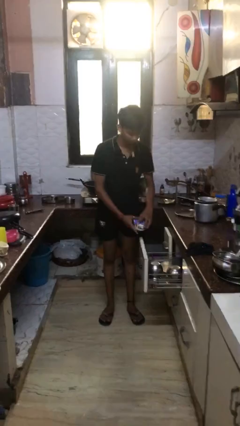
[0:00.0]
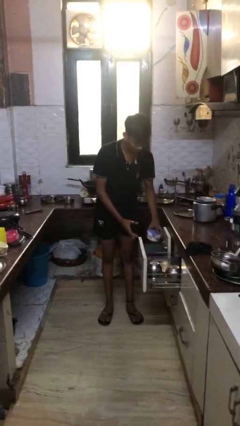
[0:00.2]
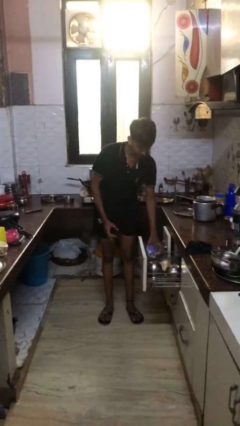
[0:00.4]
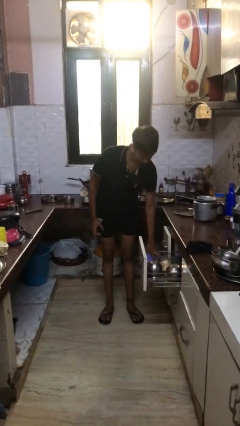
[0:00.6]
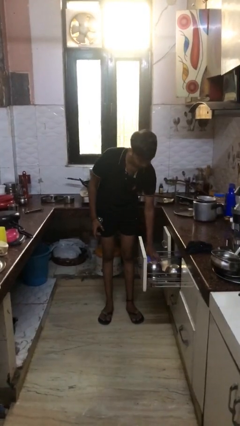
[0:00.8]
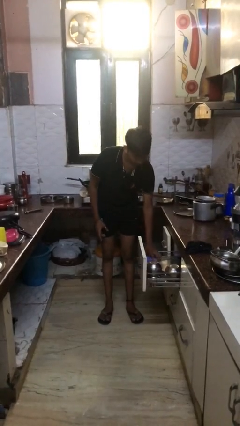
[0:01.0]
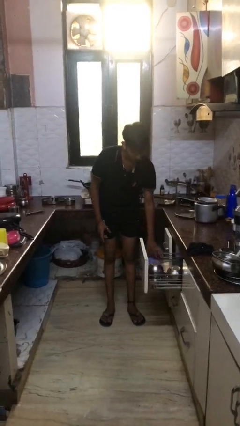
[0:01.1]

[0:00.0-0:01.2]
person puts object into kitchen drawer

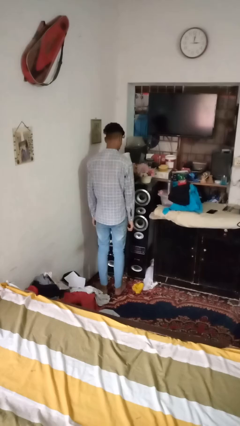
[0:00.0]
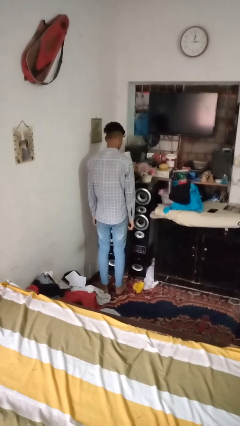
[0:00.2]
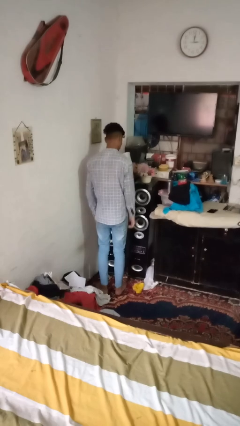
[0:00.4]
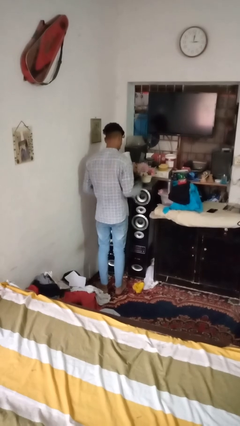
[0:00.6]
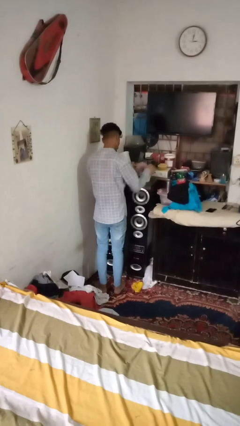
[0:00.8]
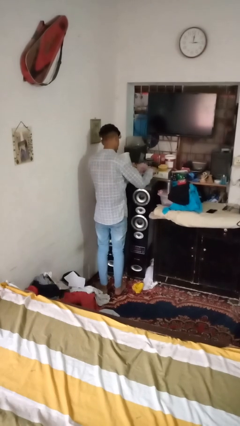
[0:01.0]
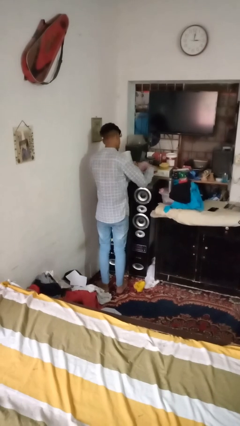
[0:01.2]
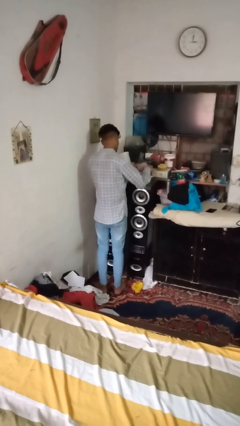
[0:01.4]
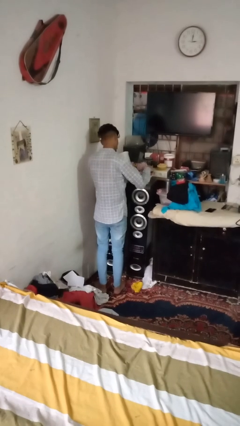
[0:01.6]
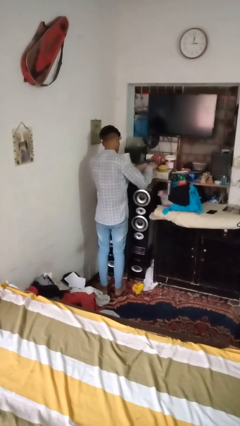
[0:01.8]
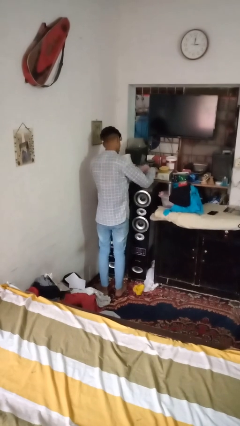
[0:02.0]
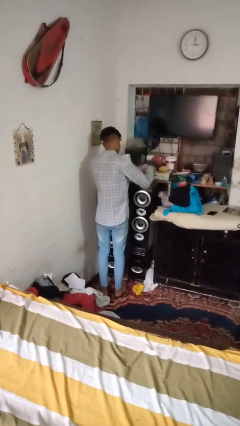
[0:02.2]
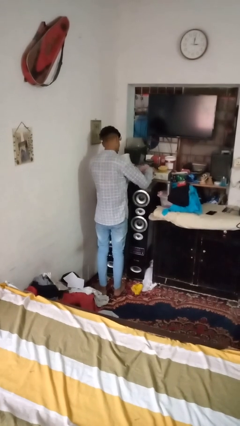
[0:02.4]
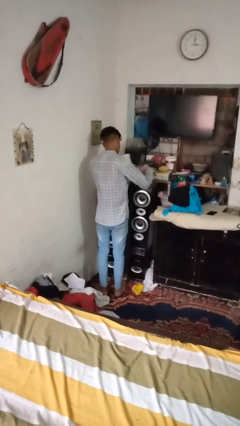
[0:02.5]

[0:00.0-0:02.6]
person arranges flowers in vase

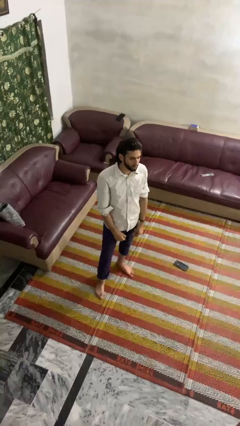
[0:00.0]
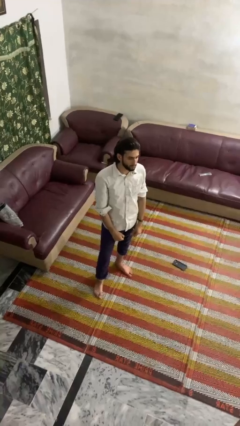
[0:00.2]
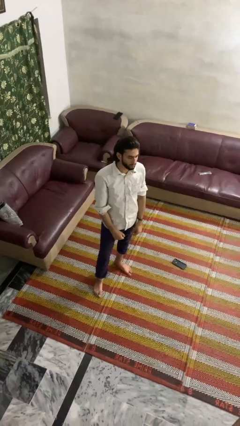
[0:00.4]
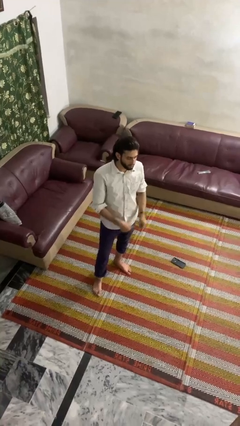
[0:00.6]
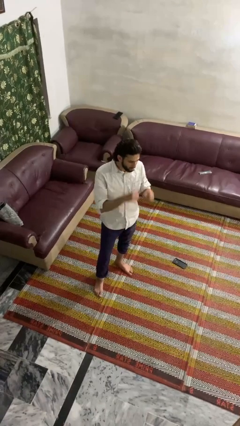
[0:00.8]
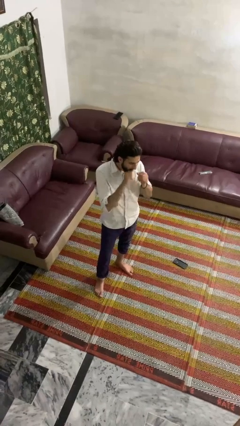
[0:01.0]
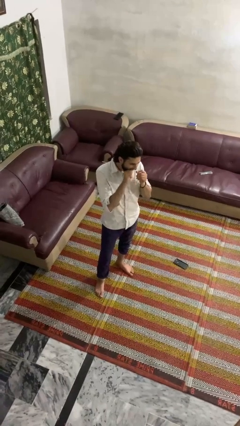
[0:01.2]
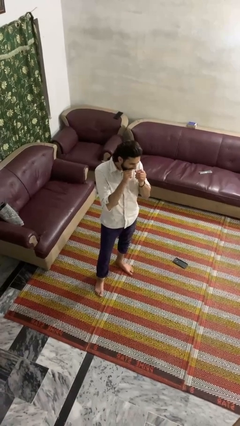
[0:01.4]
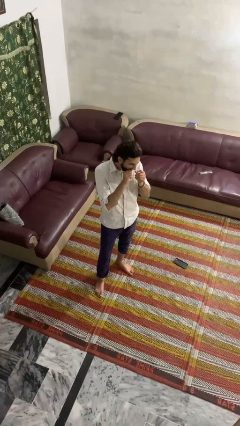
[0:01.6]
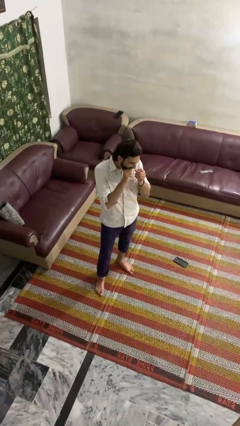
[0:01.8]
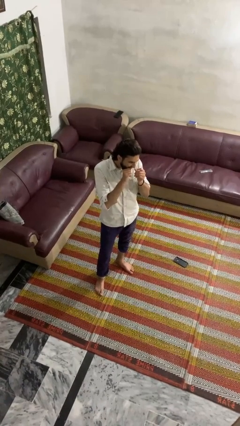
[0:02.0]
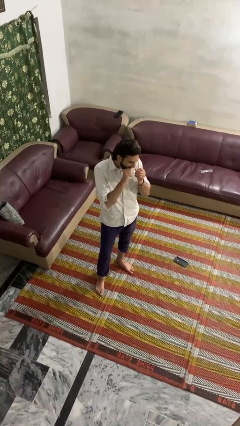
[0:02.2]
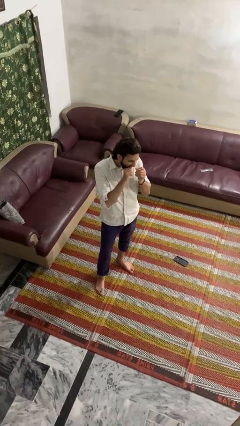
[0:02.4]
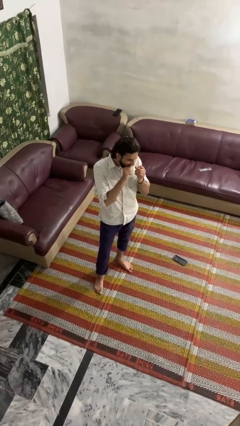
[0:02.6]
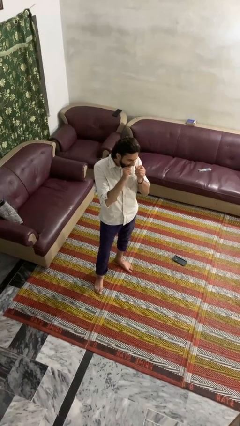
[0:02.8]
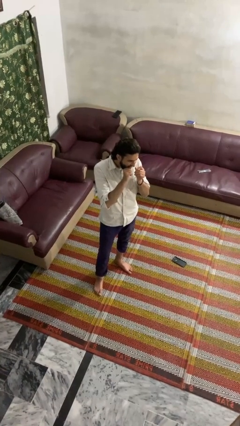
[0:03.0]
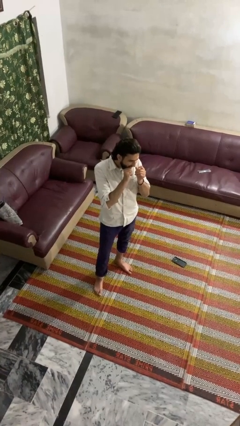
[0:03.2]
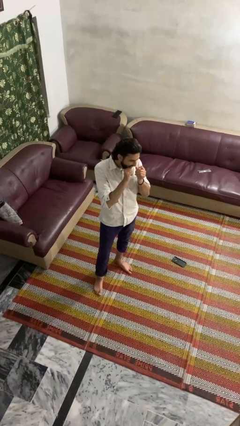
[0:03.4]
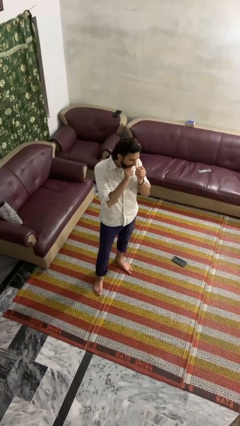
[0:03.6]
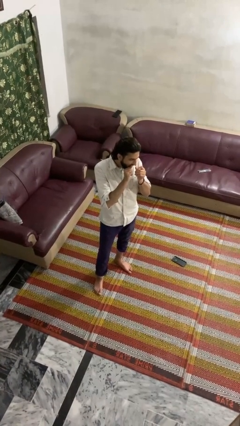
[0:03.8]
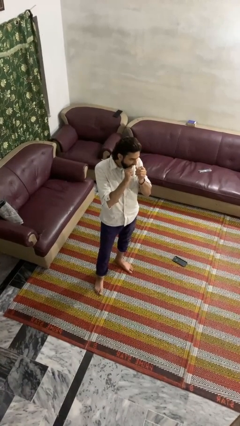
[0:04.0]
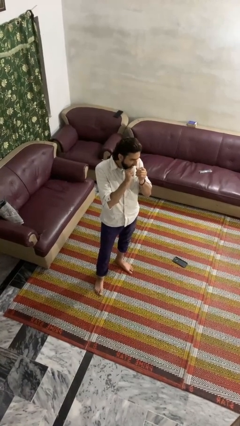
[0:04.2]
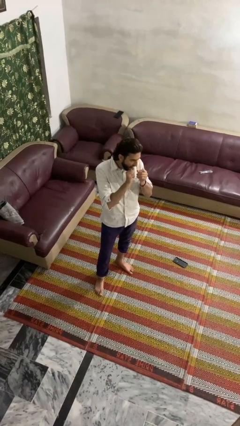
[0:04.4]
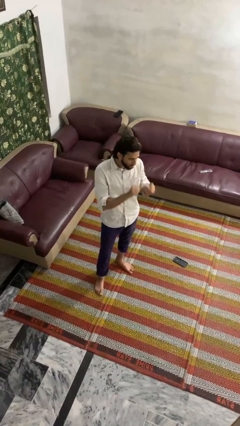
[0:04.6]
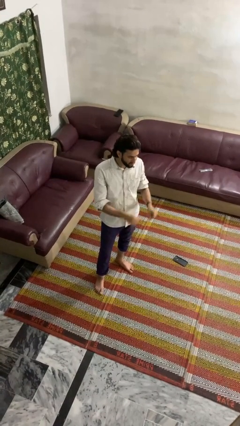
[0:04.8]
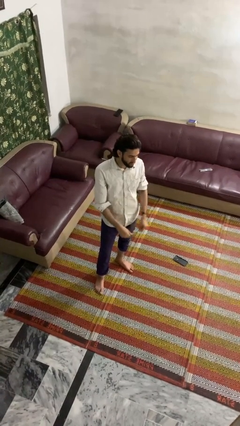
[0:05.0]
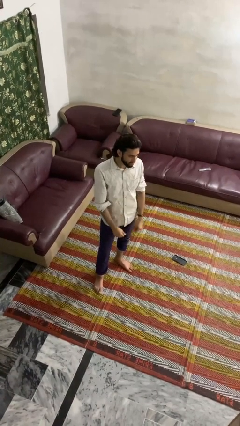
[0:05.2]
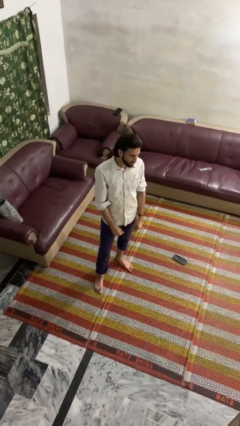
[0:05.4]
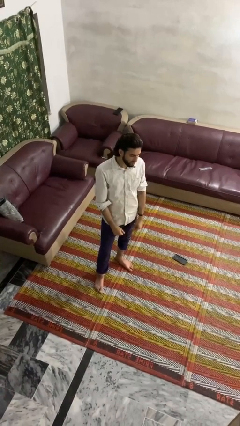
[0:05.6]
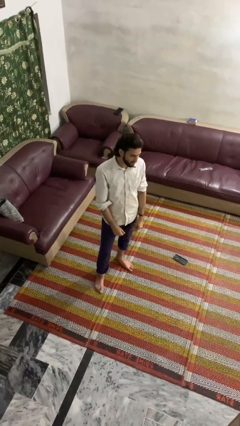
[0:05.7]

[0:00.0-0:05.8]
person flosses

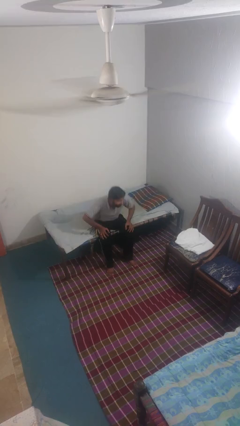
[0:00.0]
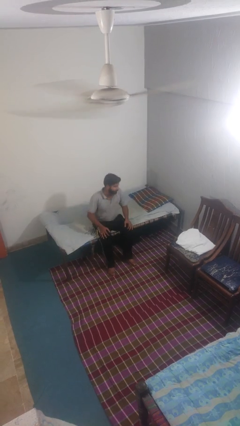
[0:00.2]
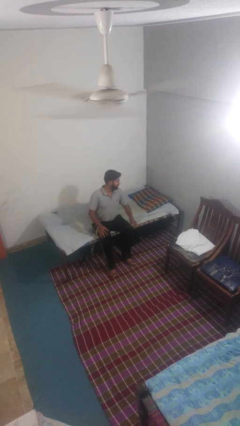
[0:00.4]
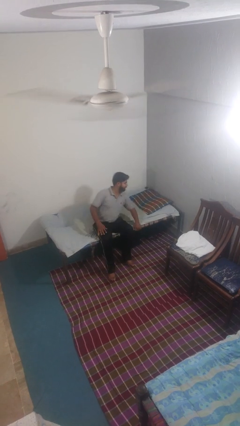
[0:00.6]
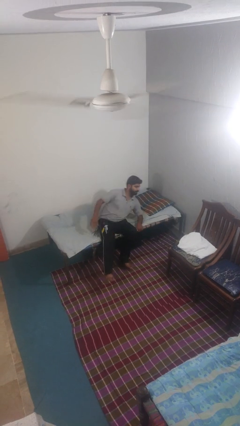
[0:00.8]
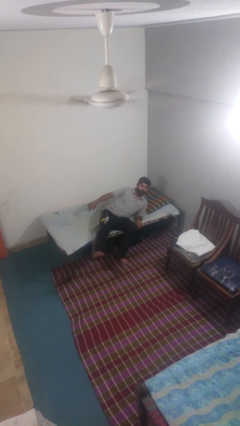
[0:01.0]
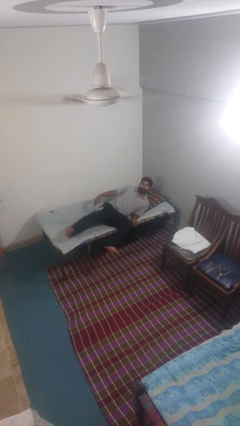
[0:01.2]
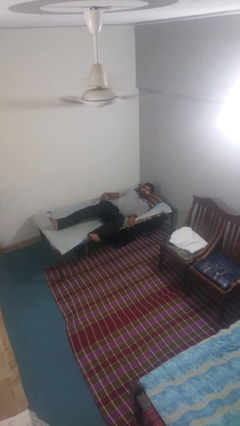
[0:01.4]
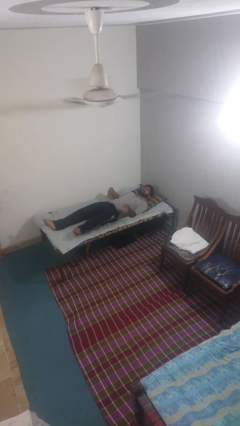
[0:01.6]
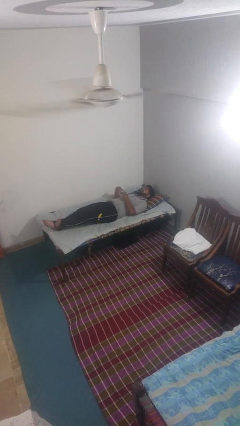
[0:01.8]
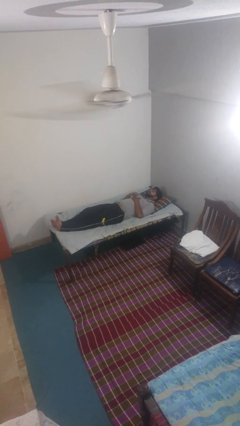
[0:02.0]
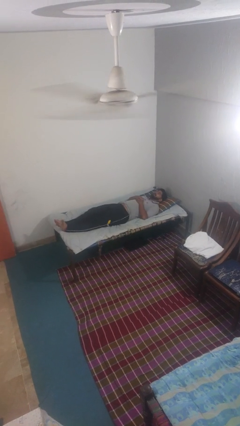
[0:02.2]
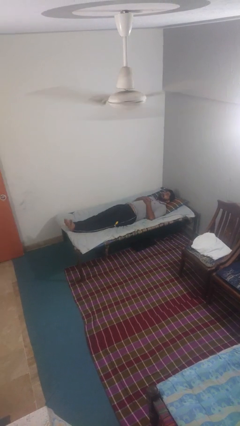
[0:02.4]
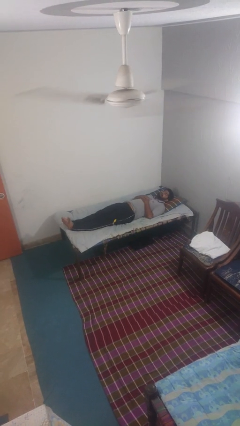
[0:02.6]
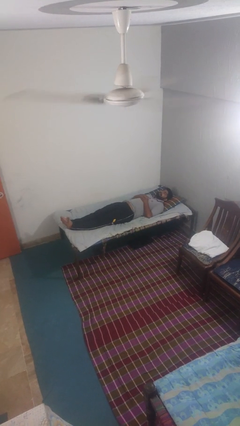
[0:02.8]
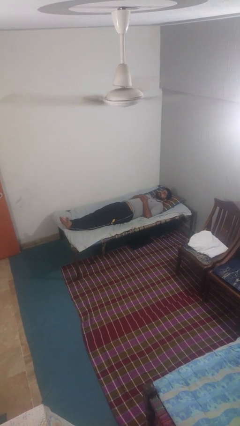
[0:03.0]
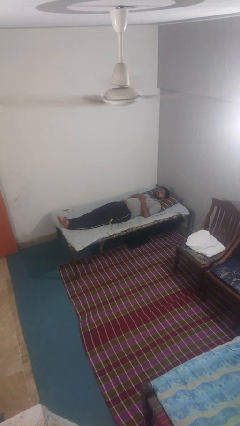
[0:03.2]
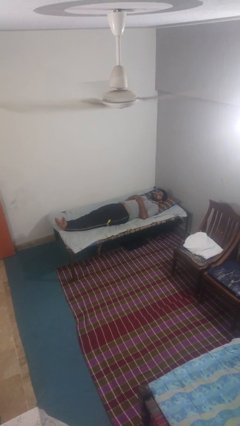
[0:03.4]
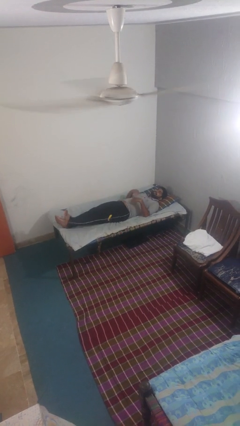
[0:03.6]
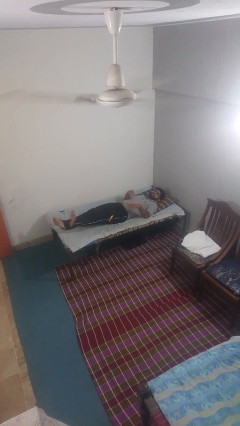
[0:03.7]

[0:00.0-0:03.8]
person lies down on bed

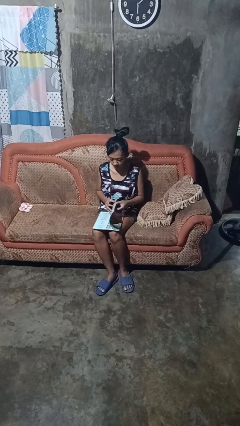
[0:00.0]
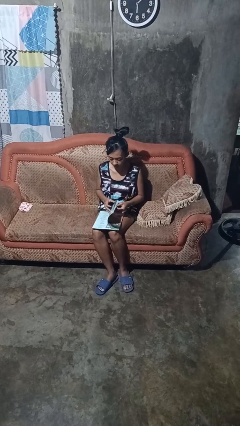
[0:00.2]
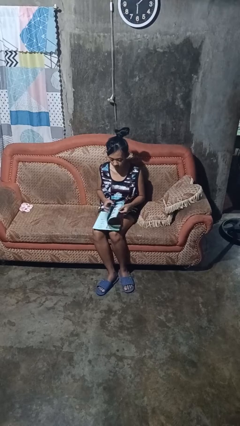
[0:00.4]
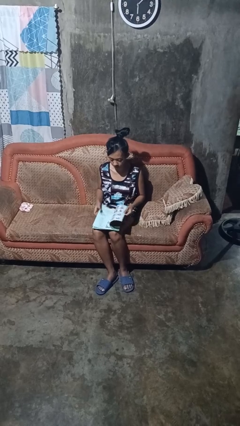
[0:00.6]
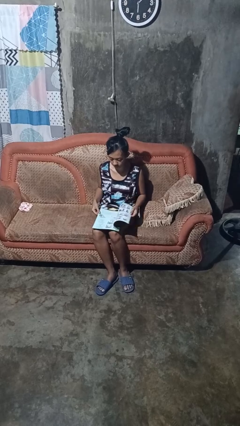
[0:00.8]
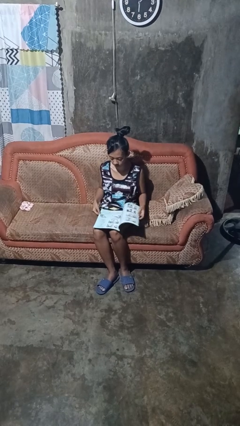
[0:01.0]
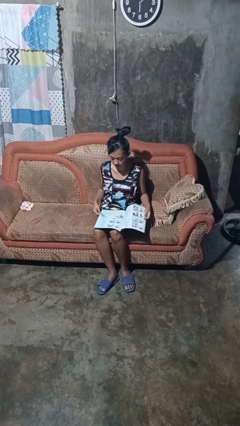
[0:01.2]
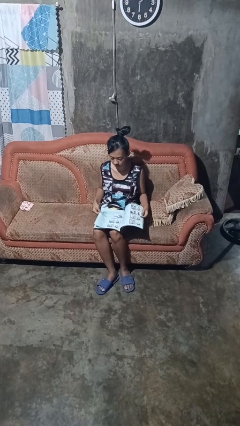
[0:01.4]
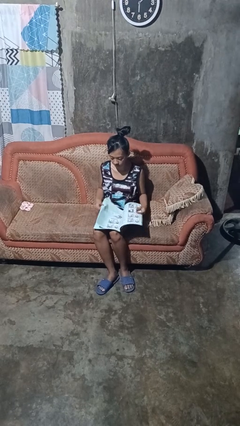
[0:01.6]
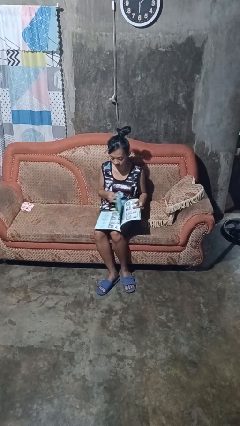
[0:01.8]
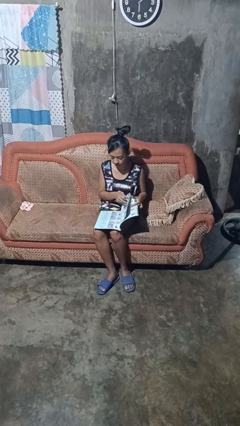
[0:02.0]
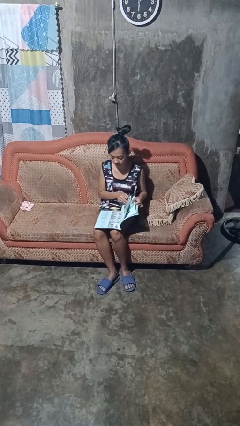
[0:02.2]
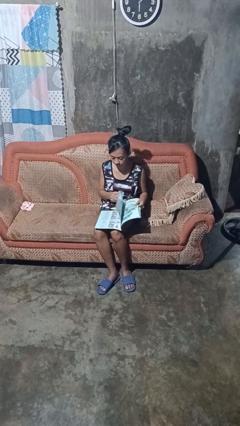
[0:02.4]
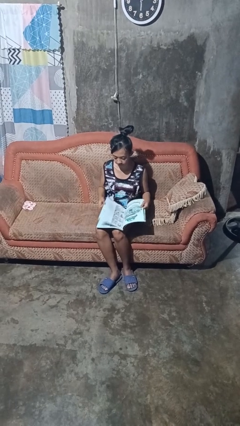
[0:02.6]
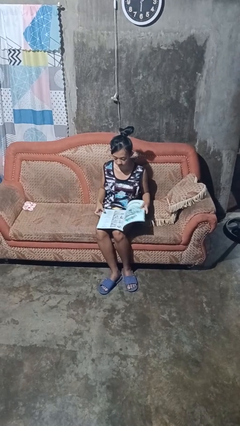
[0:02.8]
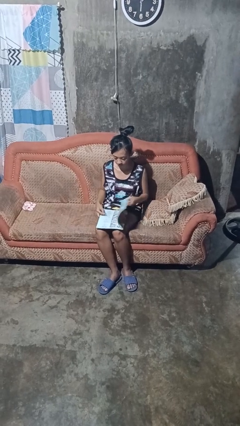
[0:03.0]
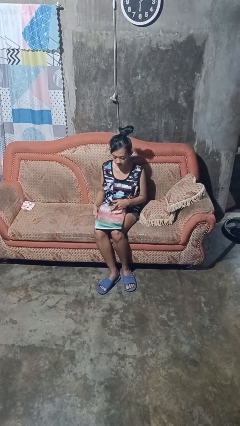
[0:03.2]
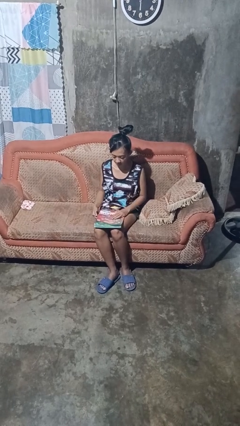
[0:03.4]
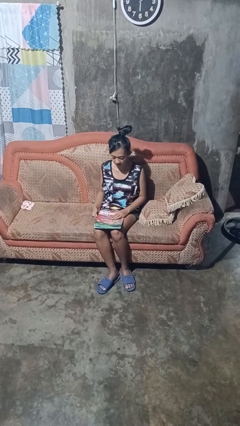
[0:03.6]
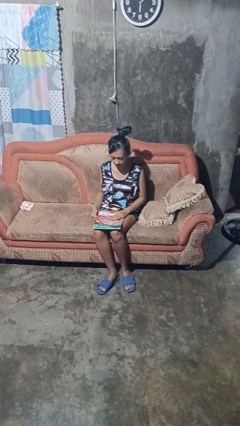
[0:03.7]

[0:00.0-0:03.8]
person reads magazine

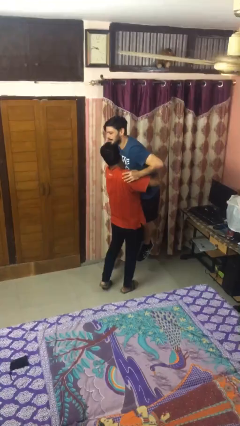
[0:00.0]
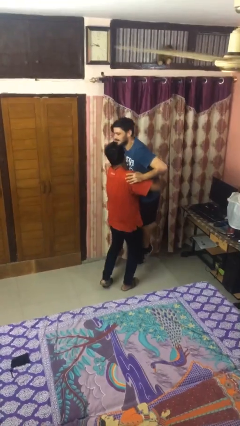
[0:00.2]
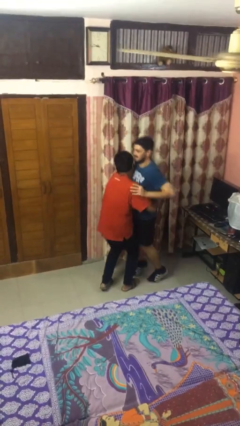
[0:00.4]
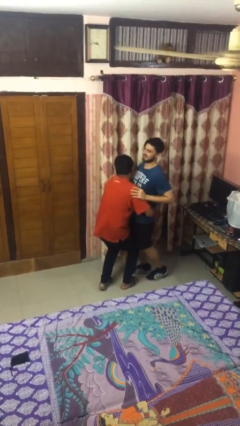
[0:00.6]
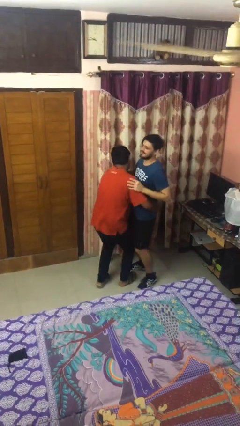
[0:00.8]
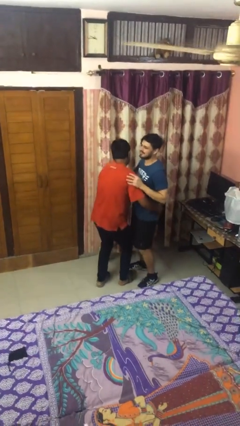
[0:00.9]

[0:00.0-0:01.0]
person puts down person
